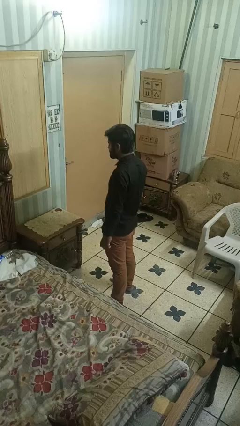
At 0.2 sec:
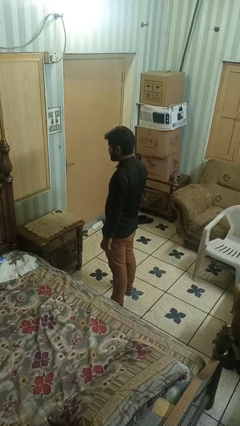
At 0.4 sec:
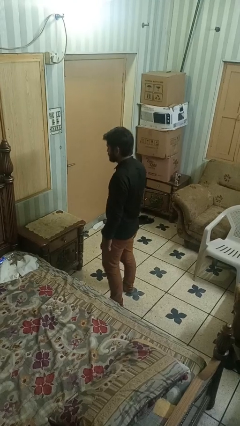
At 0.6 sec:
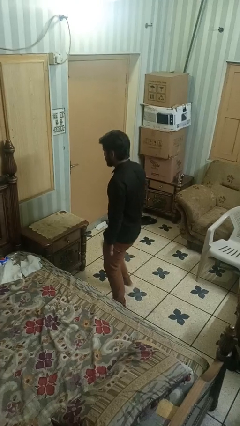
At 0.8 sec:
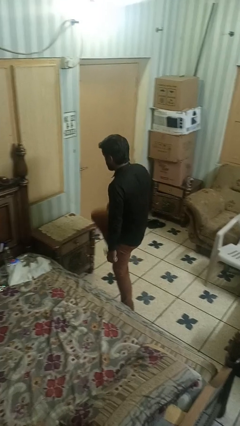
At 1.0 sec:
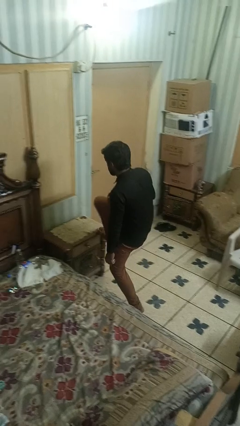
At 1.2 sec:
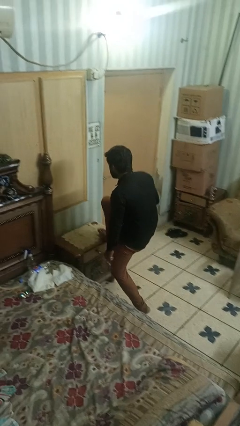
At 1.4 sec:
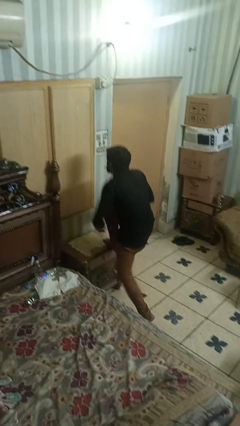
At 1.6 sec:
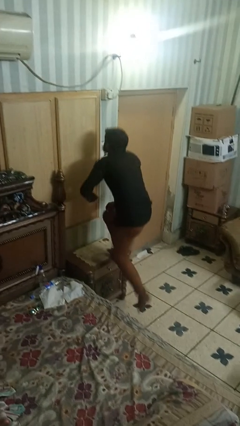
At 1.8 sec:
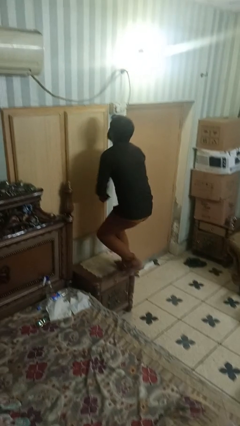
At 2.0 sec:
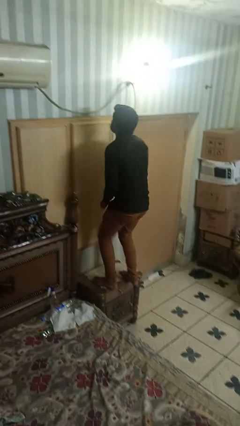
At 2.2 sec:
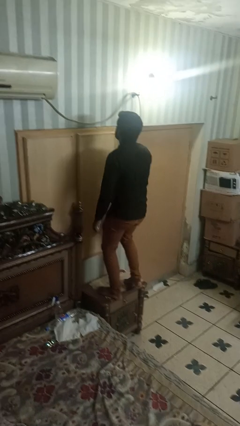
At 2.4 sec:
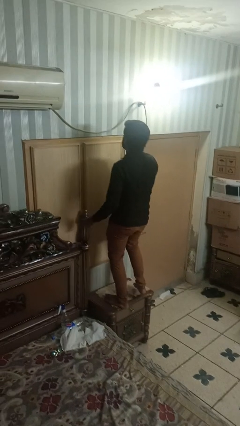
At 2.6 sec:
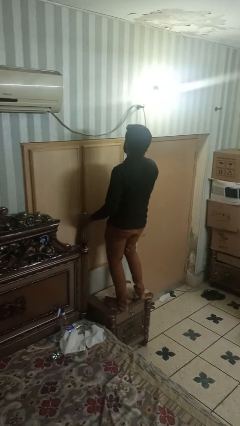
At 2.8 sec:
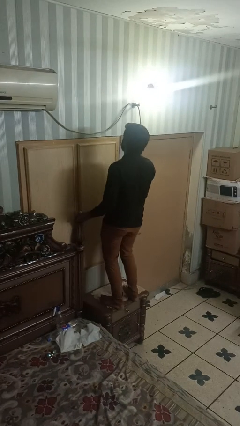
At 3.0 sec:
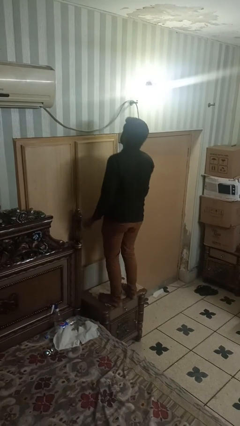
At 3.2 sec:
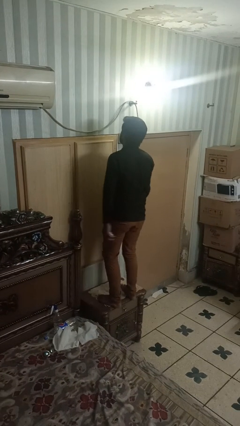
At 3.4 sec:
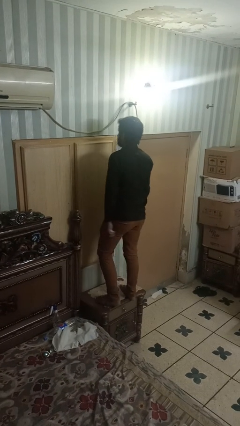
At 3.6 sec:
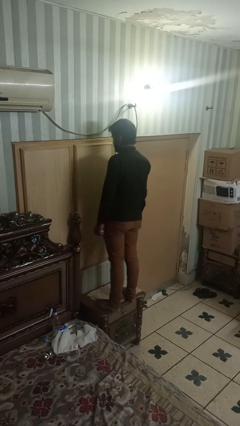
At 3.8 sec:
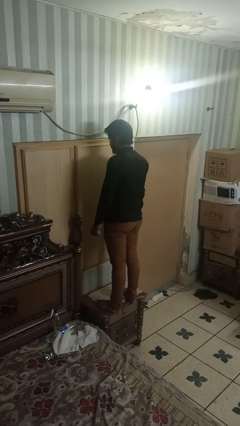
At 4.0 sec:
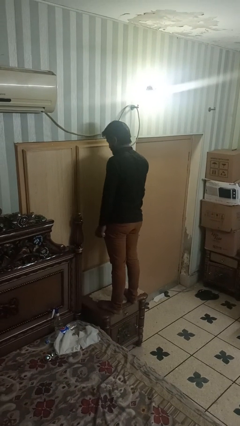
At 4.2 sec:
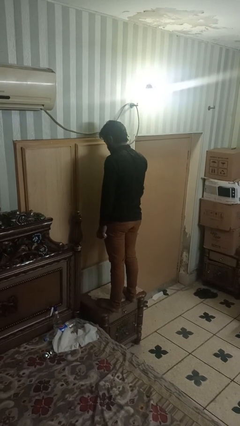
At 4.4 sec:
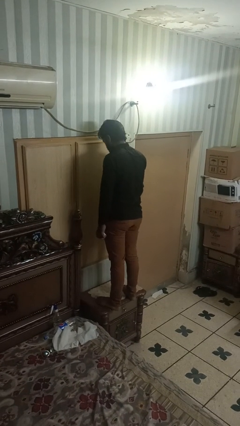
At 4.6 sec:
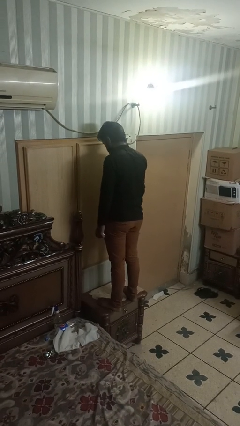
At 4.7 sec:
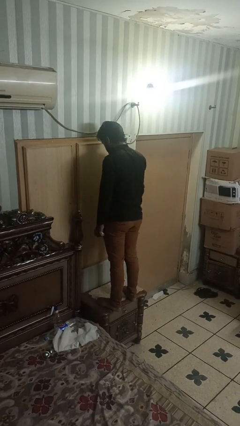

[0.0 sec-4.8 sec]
person climbs on table

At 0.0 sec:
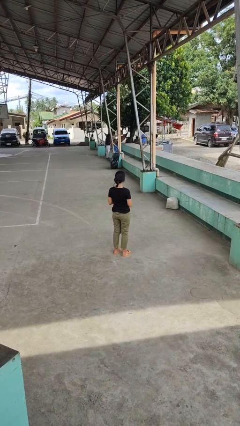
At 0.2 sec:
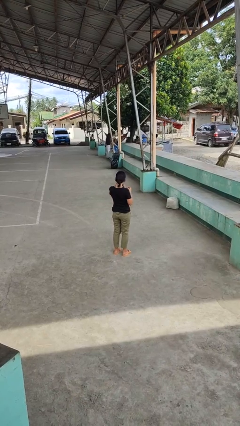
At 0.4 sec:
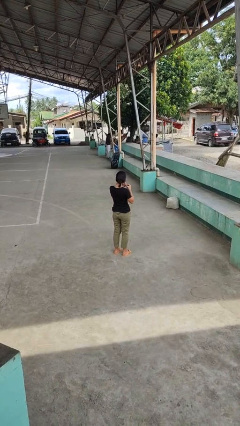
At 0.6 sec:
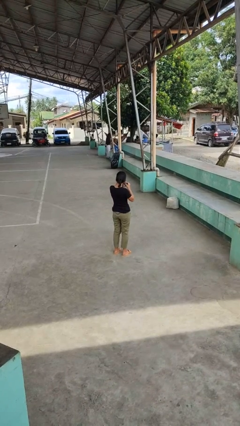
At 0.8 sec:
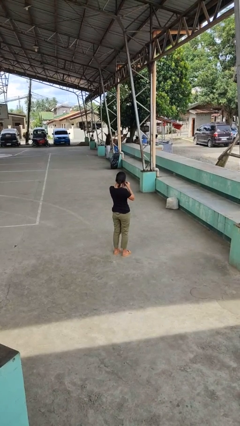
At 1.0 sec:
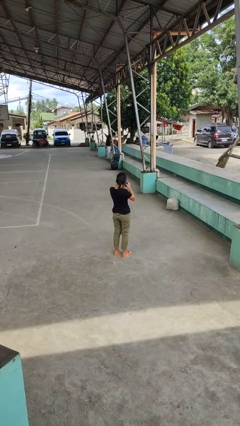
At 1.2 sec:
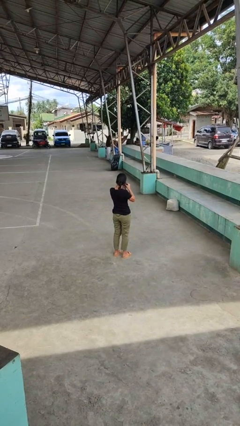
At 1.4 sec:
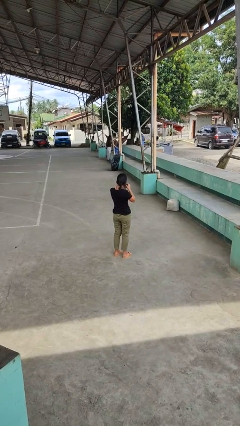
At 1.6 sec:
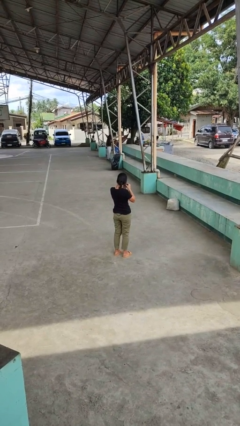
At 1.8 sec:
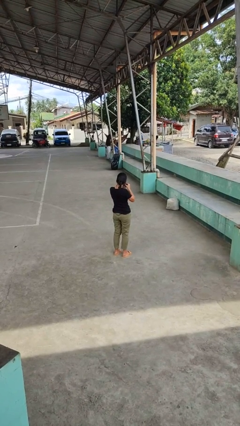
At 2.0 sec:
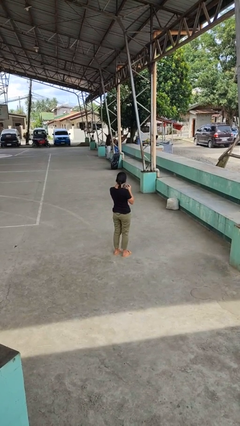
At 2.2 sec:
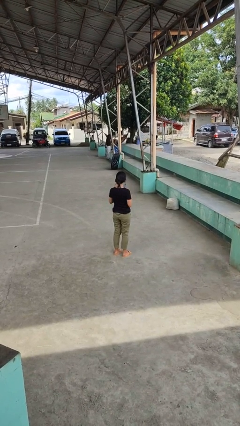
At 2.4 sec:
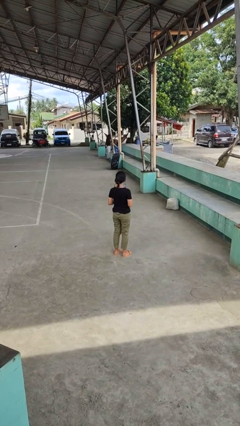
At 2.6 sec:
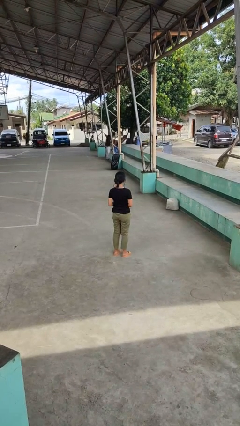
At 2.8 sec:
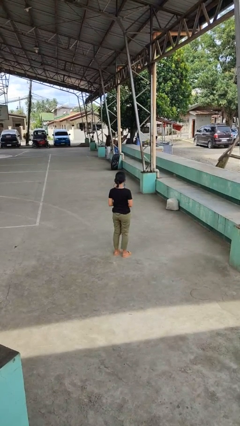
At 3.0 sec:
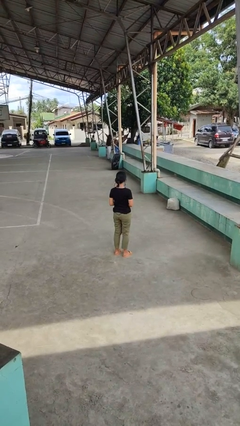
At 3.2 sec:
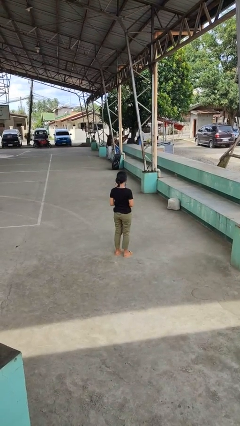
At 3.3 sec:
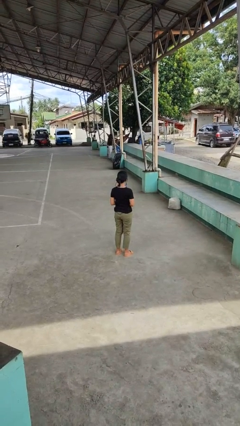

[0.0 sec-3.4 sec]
person puts on earrings

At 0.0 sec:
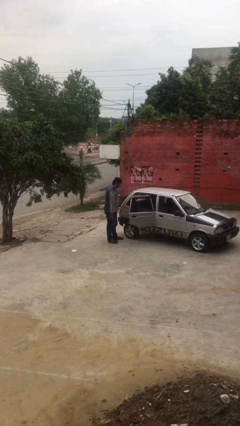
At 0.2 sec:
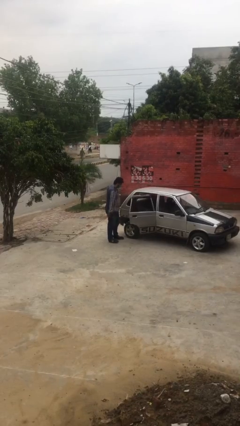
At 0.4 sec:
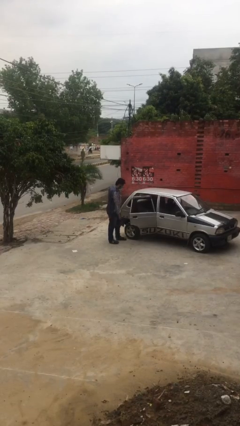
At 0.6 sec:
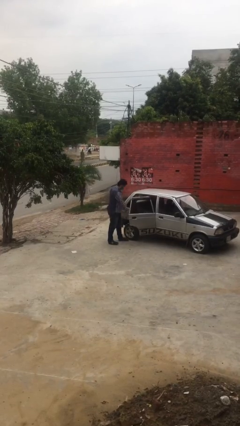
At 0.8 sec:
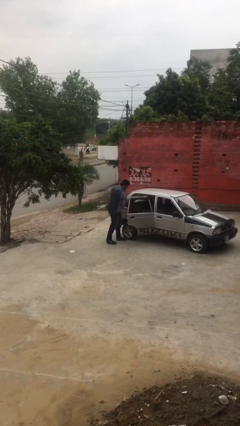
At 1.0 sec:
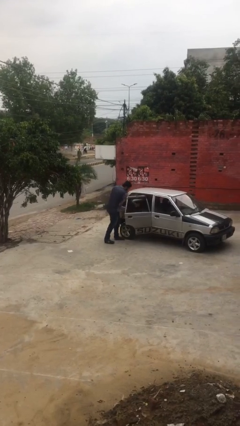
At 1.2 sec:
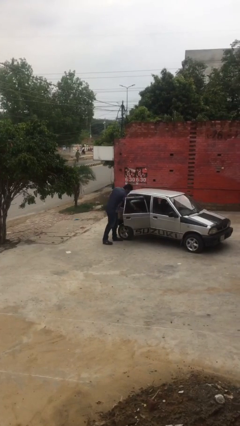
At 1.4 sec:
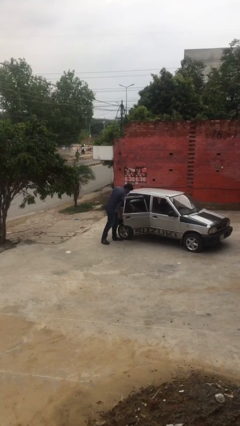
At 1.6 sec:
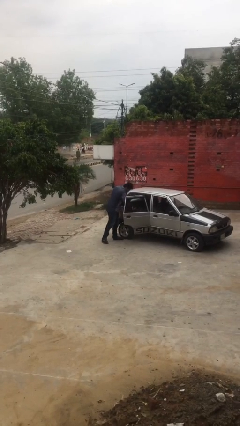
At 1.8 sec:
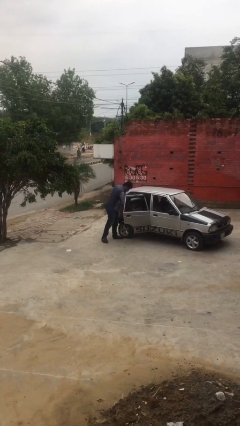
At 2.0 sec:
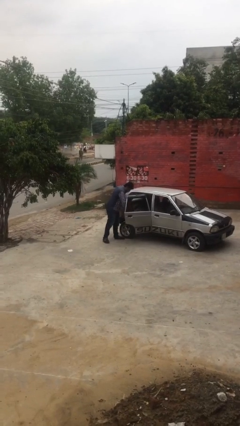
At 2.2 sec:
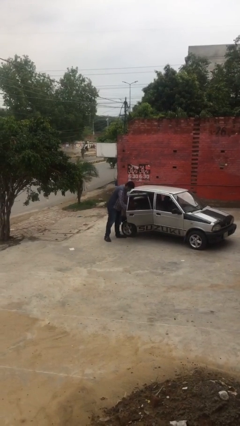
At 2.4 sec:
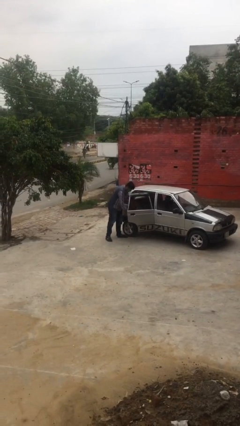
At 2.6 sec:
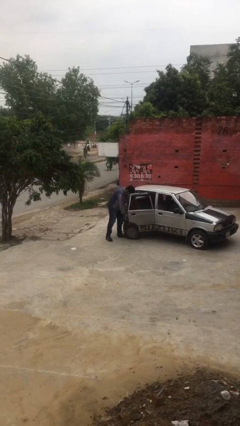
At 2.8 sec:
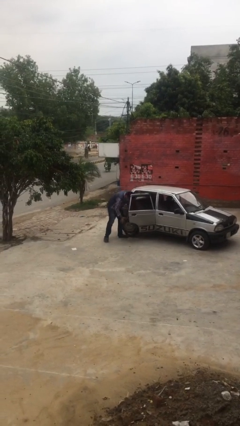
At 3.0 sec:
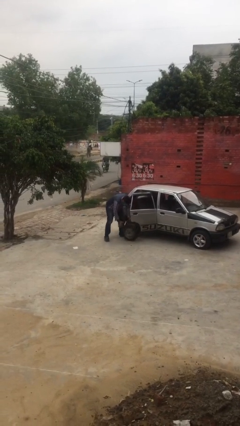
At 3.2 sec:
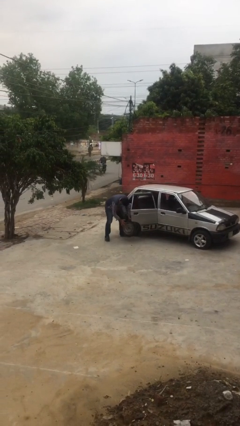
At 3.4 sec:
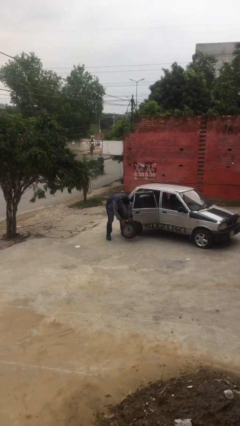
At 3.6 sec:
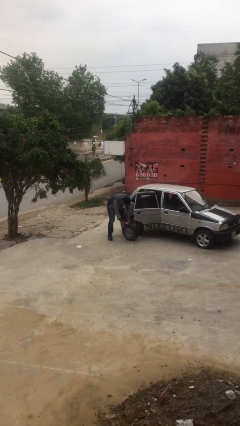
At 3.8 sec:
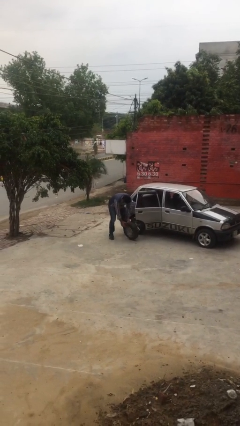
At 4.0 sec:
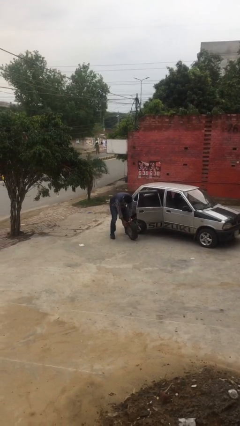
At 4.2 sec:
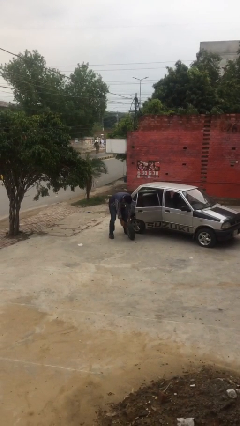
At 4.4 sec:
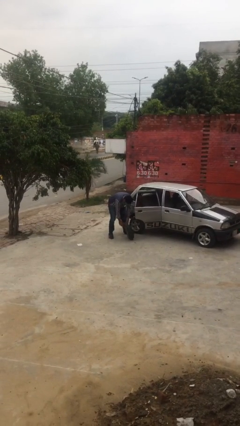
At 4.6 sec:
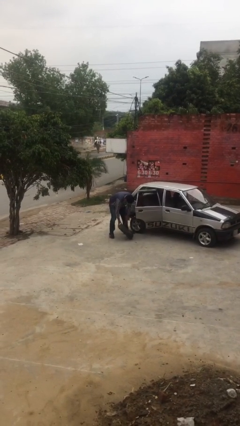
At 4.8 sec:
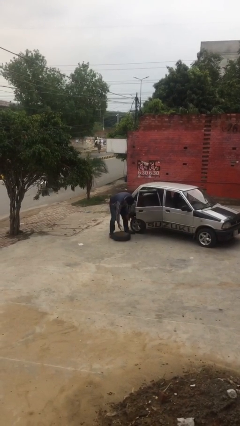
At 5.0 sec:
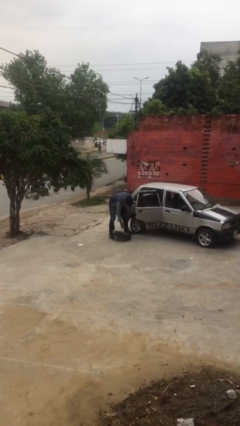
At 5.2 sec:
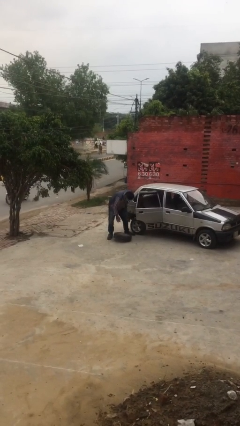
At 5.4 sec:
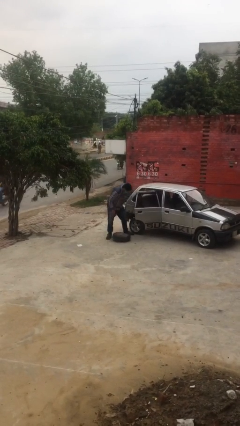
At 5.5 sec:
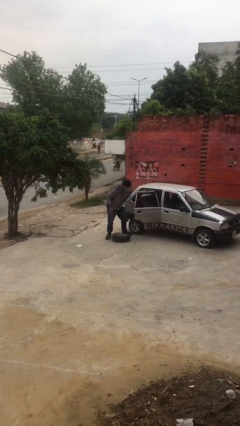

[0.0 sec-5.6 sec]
person unloads car

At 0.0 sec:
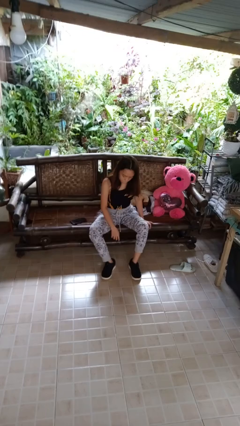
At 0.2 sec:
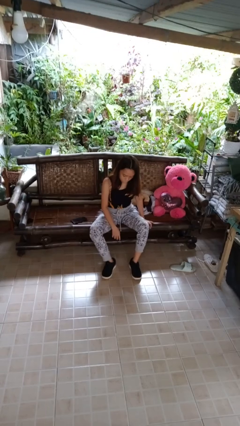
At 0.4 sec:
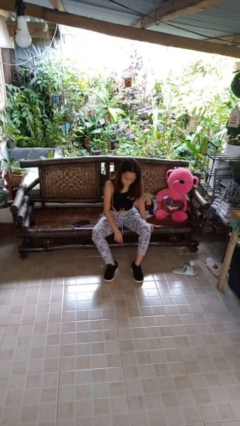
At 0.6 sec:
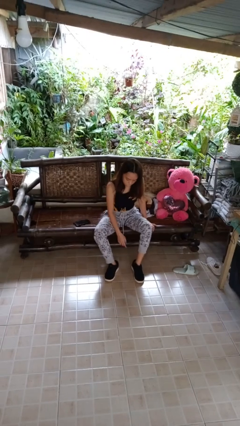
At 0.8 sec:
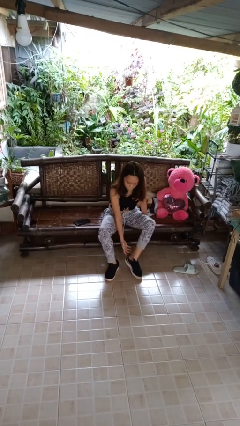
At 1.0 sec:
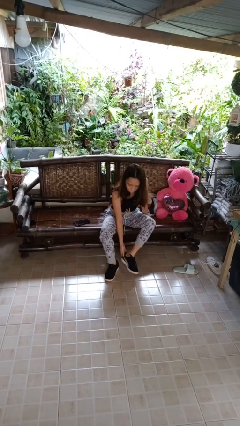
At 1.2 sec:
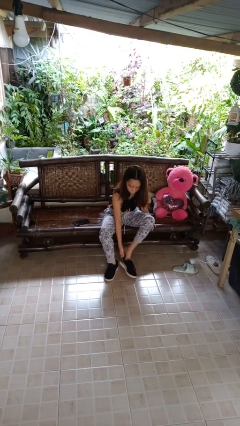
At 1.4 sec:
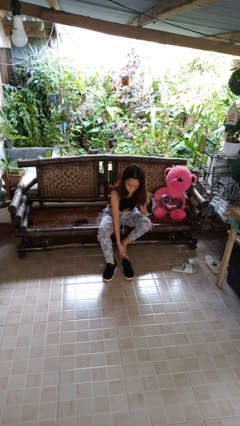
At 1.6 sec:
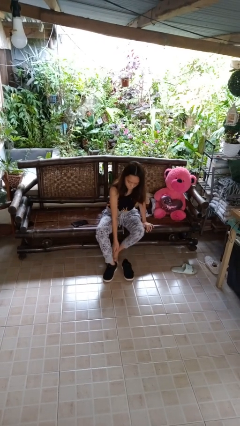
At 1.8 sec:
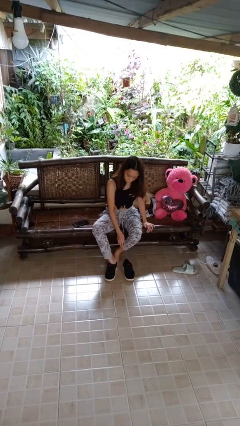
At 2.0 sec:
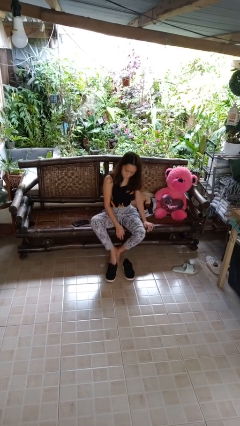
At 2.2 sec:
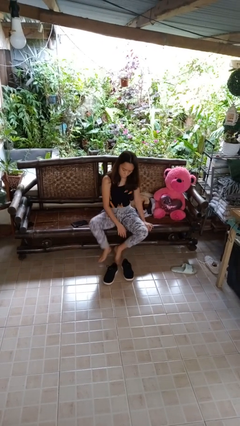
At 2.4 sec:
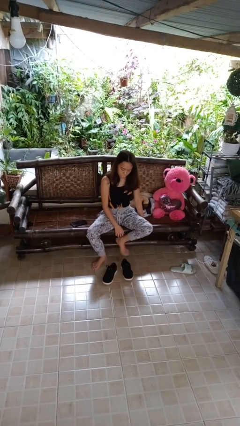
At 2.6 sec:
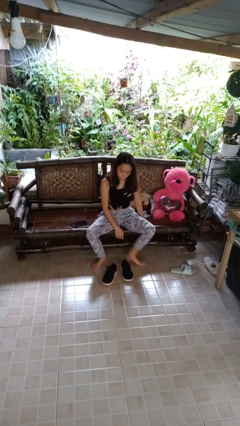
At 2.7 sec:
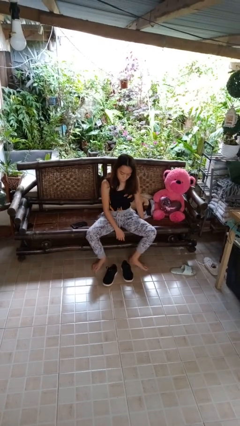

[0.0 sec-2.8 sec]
person takes off shoes

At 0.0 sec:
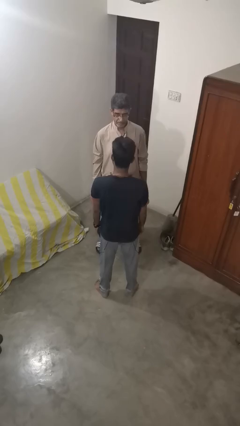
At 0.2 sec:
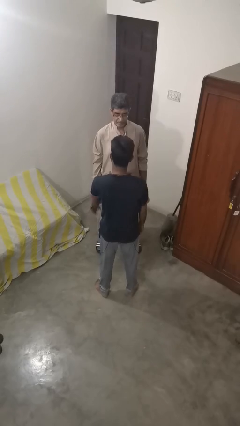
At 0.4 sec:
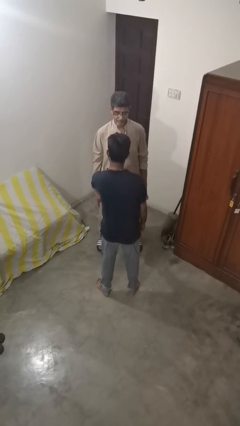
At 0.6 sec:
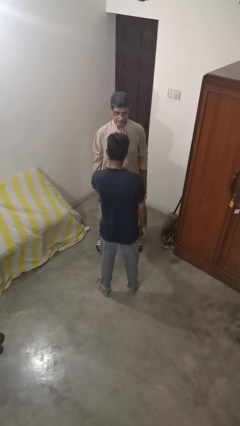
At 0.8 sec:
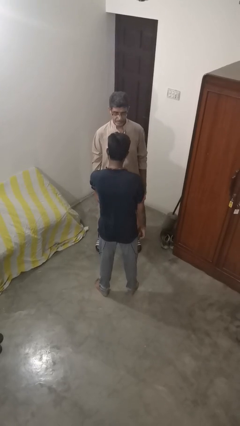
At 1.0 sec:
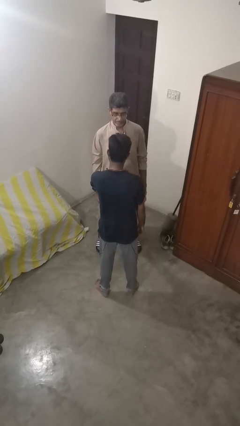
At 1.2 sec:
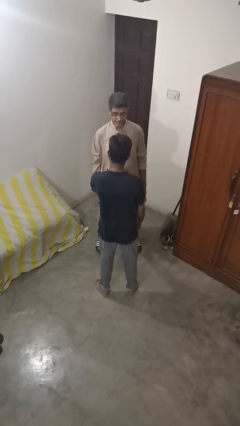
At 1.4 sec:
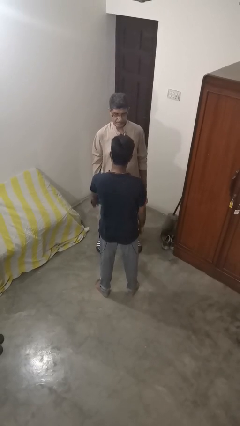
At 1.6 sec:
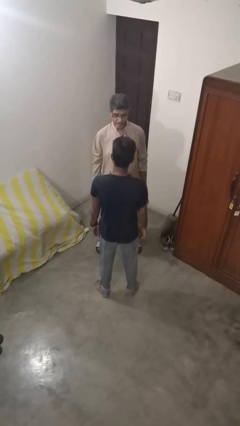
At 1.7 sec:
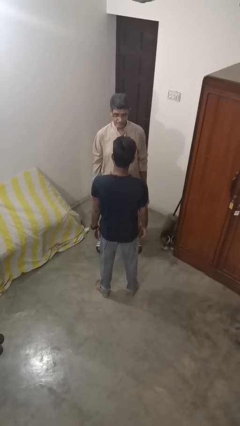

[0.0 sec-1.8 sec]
person grabs person by forearm
